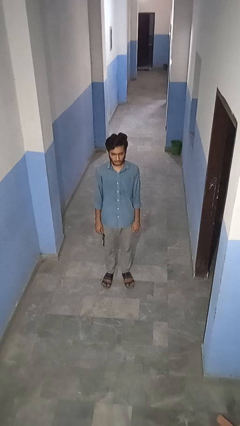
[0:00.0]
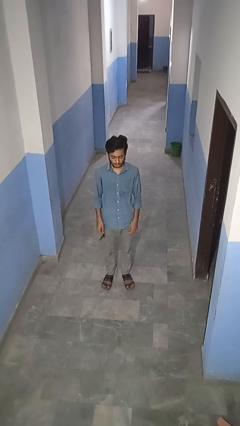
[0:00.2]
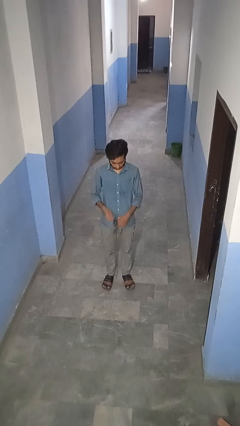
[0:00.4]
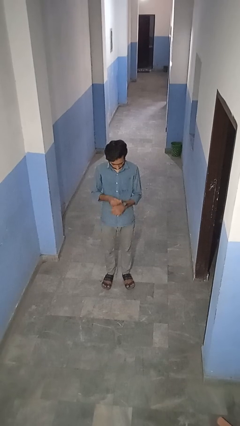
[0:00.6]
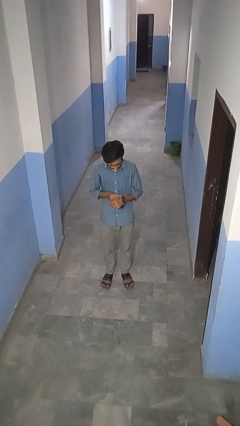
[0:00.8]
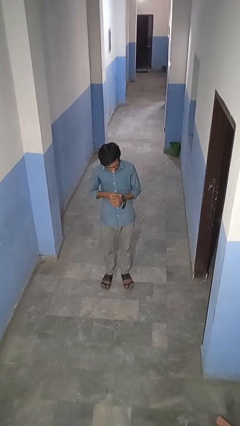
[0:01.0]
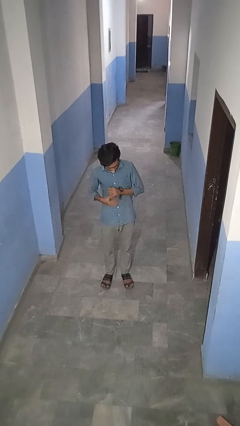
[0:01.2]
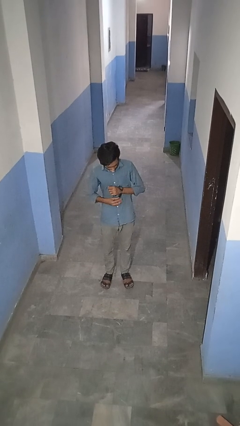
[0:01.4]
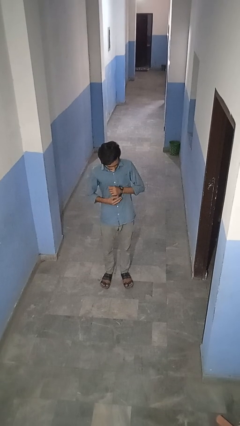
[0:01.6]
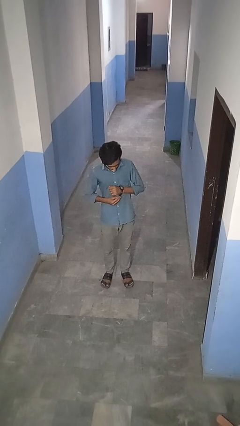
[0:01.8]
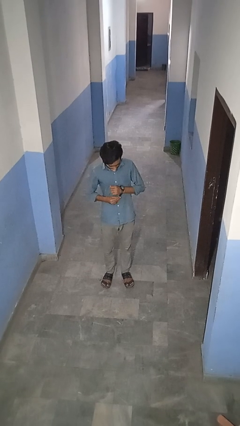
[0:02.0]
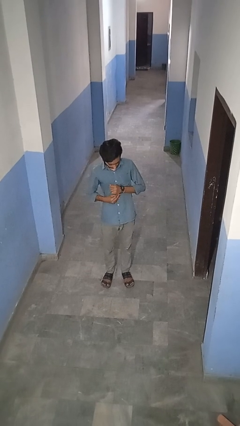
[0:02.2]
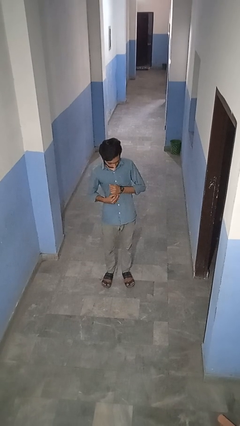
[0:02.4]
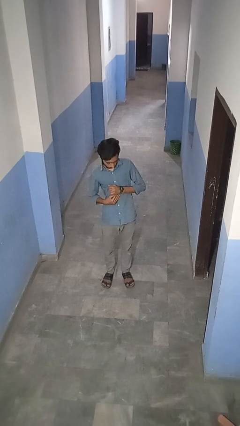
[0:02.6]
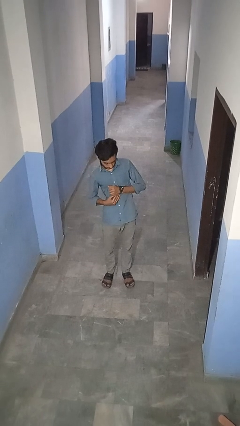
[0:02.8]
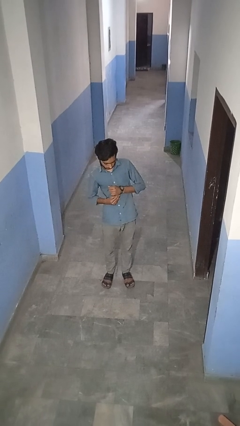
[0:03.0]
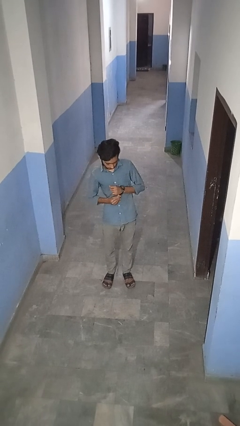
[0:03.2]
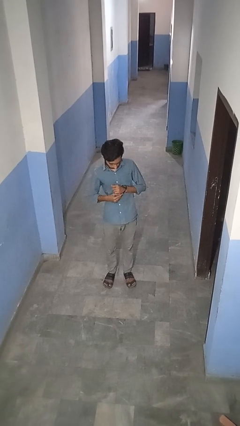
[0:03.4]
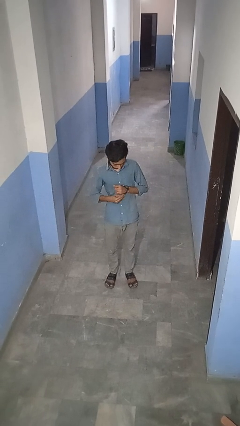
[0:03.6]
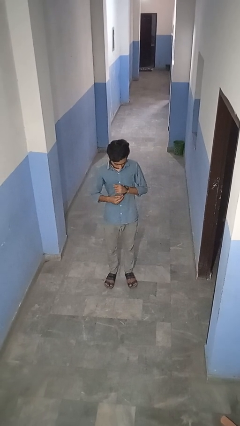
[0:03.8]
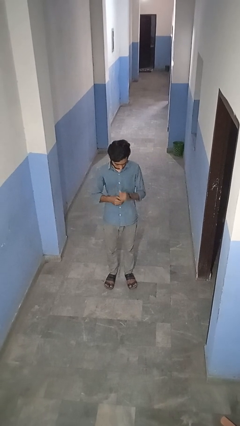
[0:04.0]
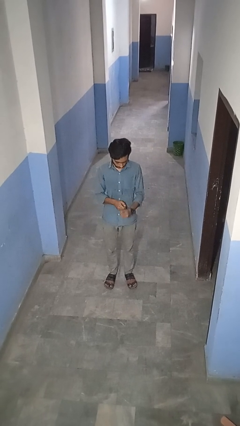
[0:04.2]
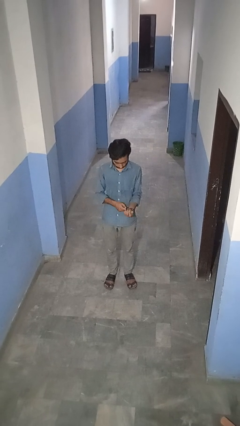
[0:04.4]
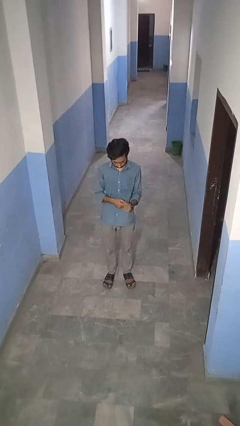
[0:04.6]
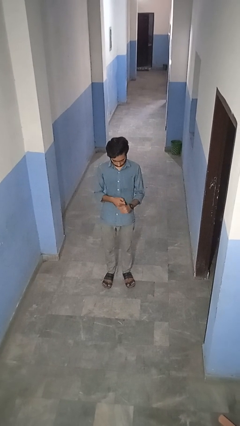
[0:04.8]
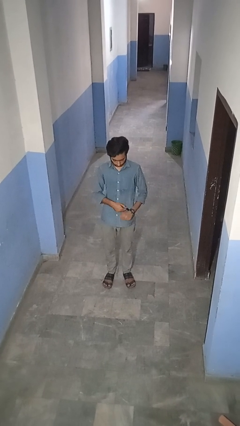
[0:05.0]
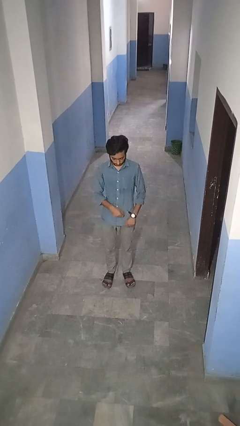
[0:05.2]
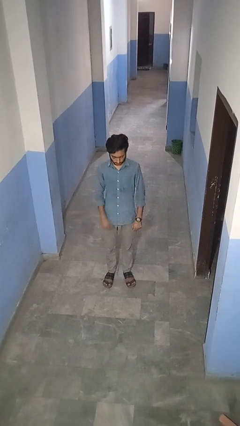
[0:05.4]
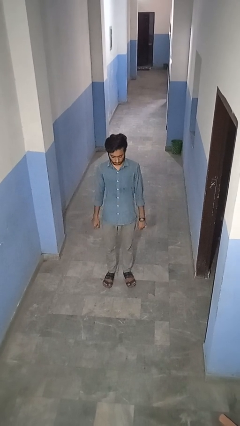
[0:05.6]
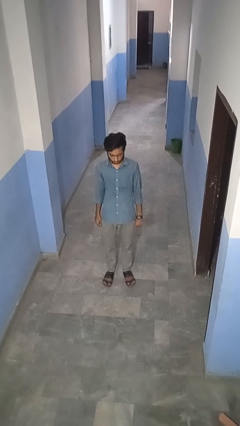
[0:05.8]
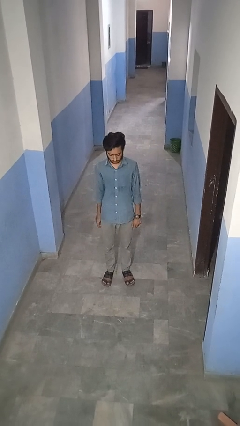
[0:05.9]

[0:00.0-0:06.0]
person puts on wristwatch

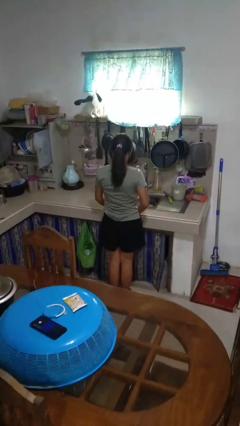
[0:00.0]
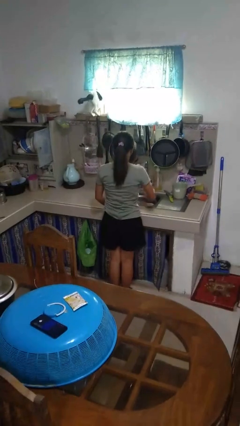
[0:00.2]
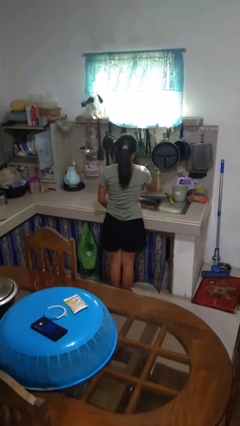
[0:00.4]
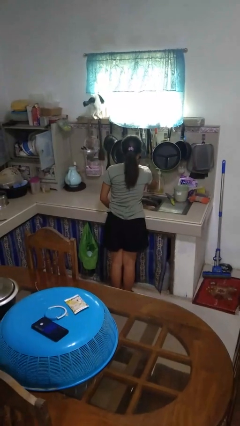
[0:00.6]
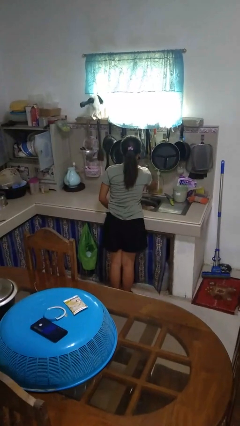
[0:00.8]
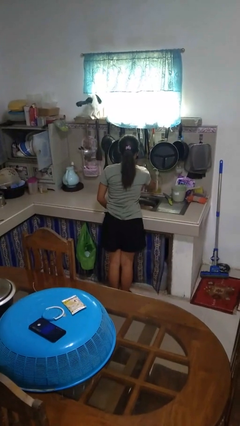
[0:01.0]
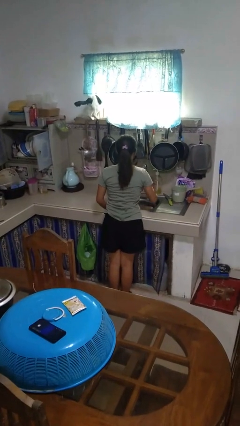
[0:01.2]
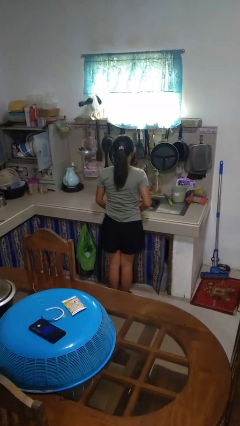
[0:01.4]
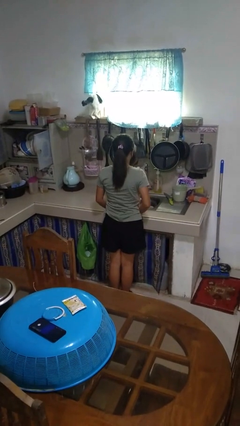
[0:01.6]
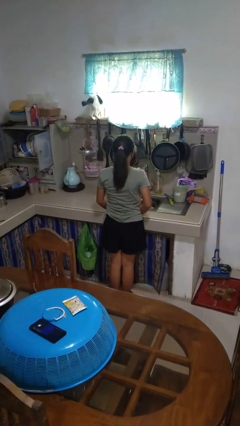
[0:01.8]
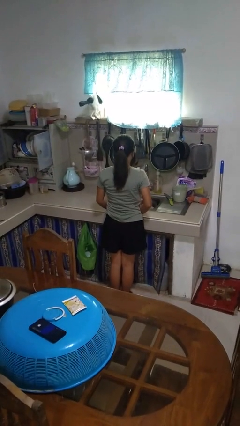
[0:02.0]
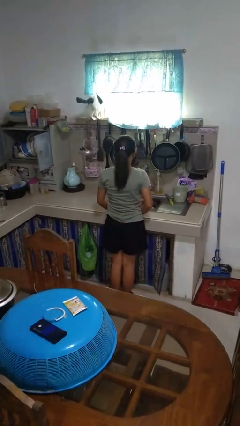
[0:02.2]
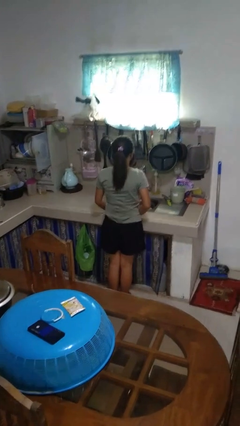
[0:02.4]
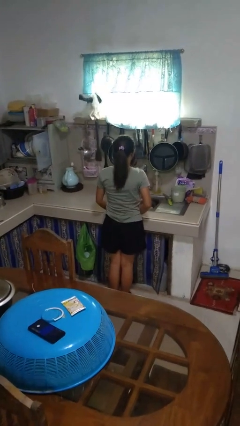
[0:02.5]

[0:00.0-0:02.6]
person turns on faucet

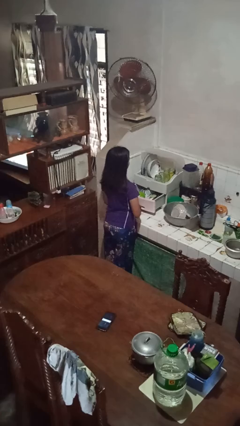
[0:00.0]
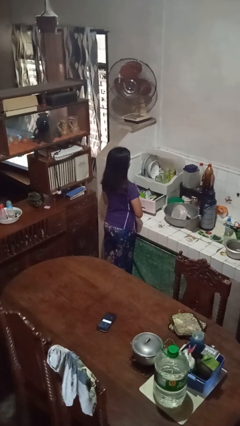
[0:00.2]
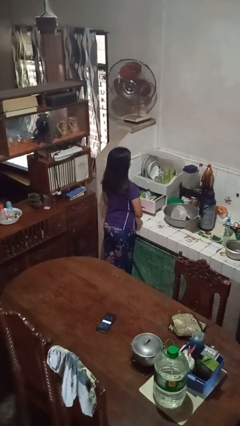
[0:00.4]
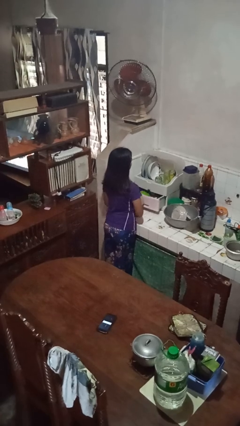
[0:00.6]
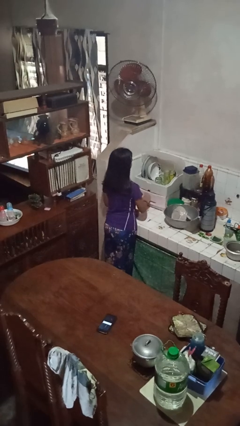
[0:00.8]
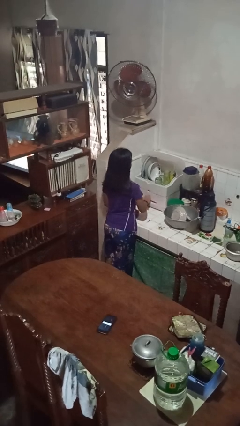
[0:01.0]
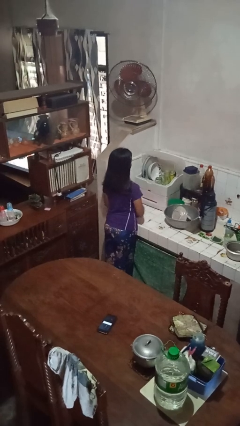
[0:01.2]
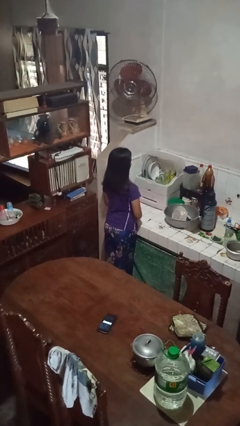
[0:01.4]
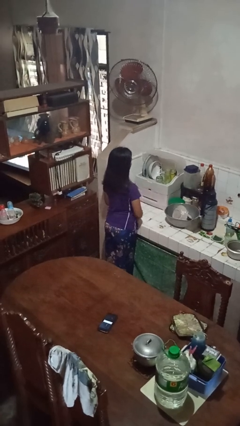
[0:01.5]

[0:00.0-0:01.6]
person closes kitchen drawer

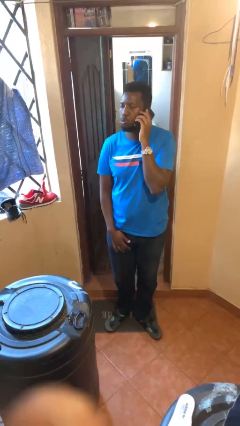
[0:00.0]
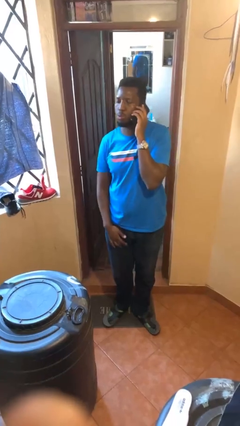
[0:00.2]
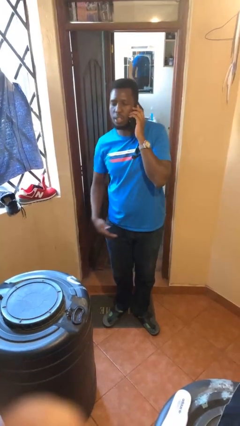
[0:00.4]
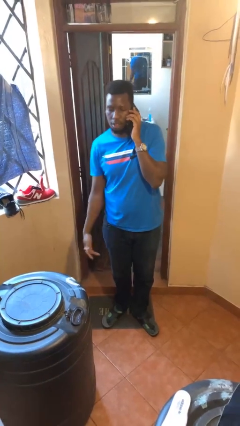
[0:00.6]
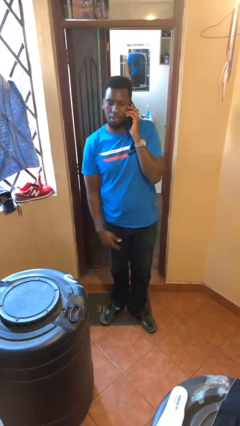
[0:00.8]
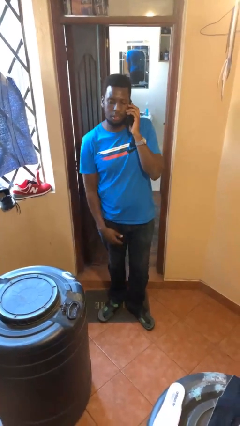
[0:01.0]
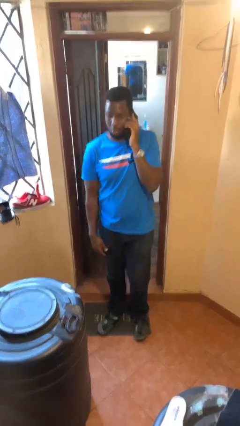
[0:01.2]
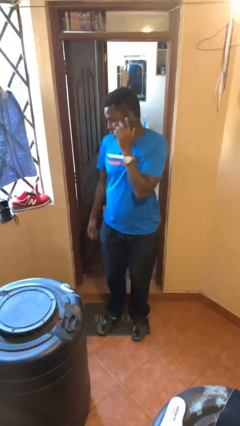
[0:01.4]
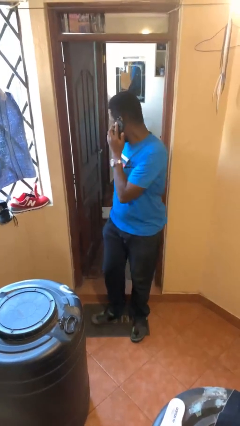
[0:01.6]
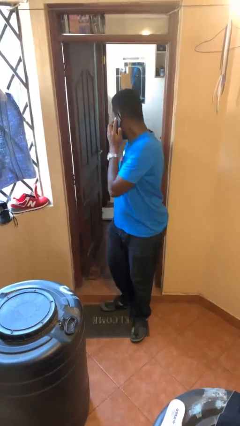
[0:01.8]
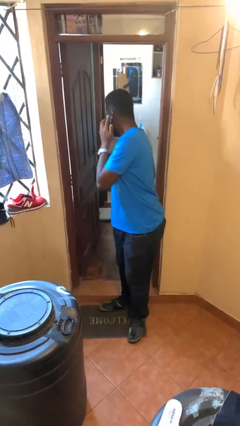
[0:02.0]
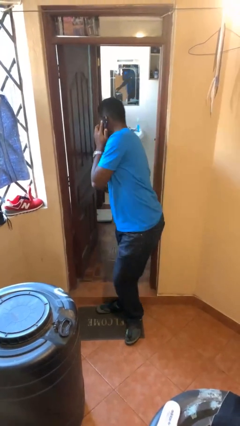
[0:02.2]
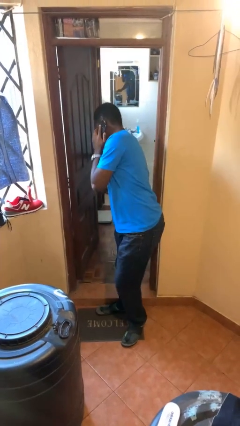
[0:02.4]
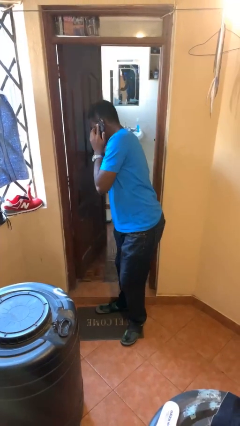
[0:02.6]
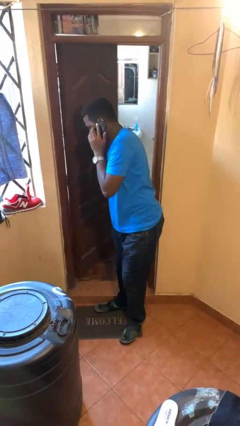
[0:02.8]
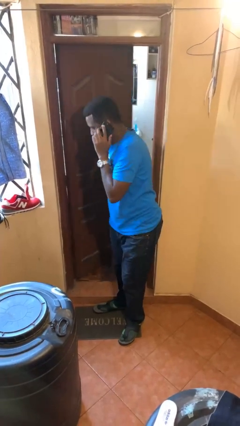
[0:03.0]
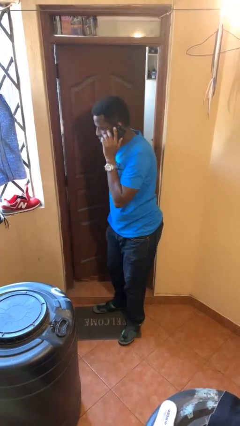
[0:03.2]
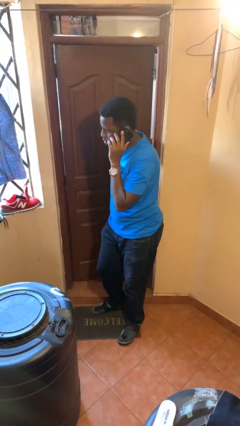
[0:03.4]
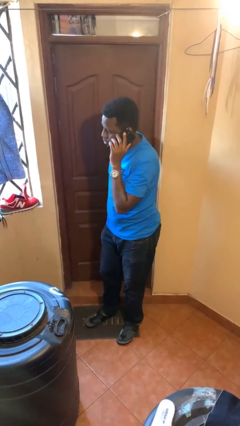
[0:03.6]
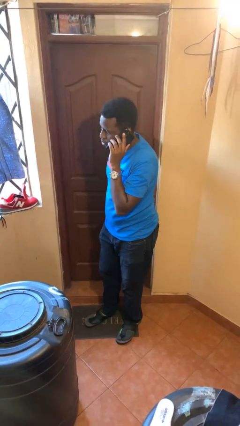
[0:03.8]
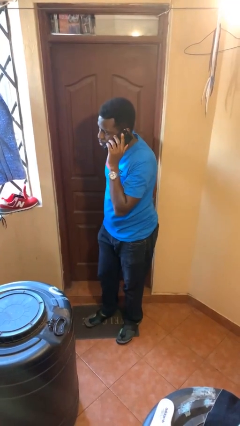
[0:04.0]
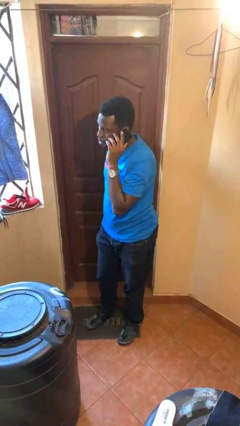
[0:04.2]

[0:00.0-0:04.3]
person closes facility door

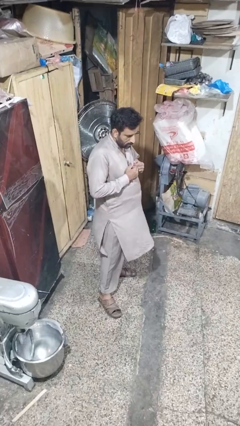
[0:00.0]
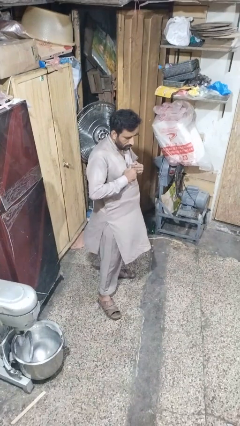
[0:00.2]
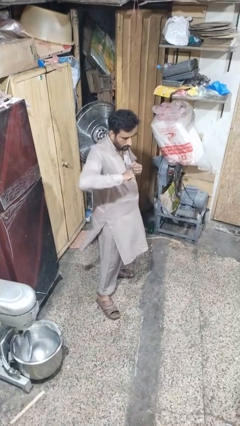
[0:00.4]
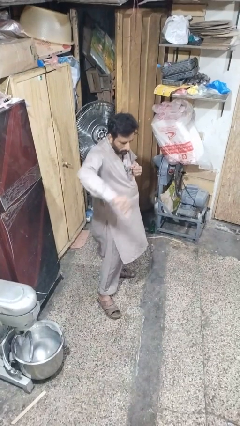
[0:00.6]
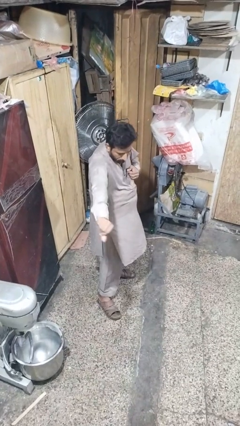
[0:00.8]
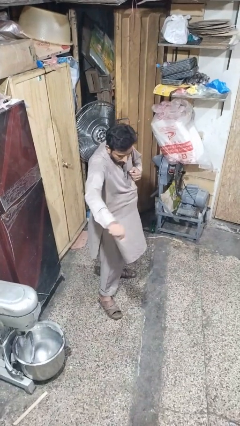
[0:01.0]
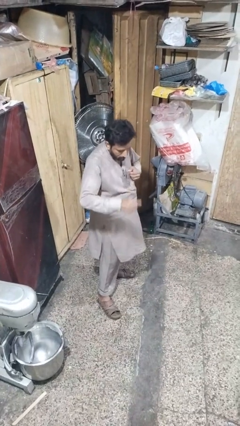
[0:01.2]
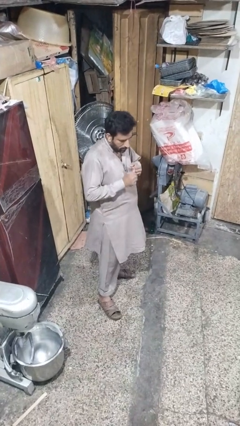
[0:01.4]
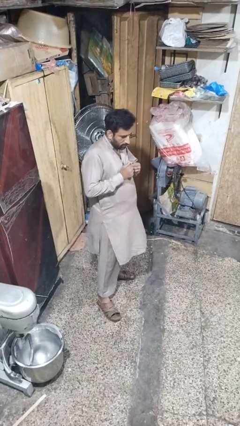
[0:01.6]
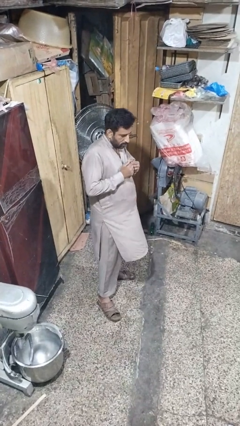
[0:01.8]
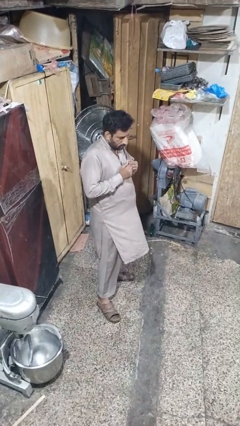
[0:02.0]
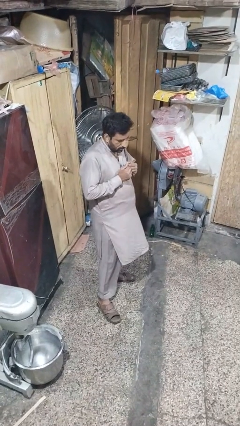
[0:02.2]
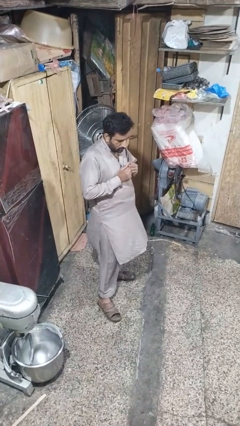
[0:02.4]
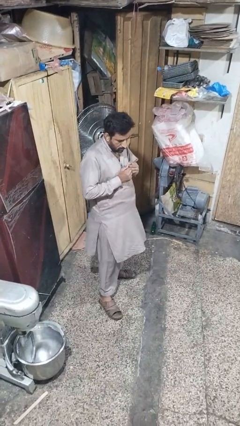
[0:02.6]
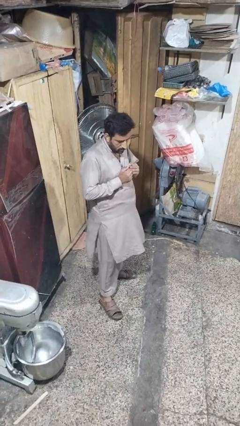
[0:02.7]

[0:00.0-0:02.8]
person karate chop

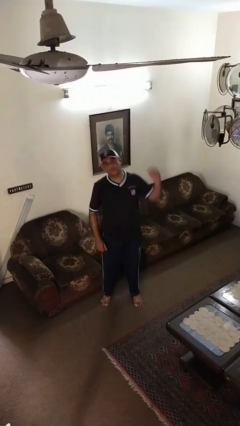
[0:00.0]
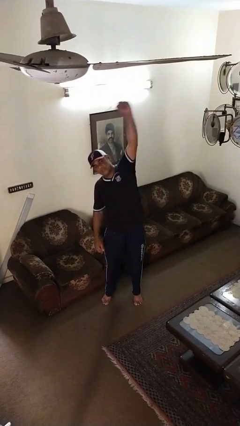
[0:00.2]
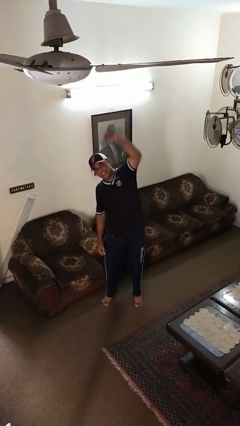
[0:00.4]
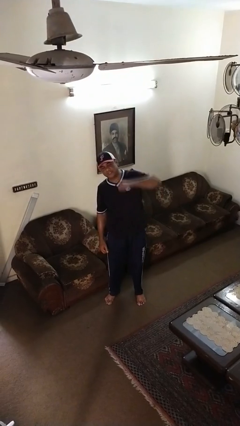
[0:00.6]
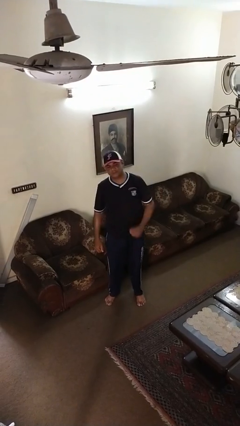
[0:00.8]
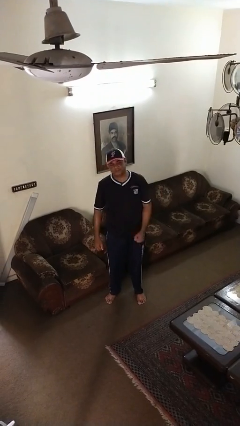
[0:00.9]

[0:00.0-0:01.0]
person punches
